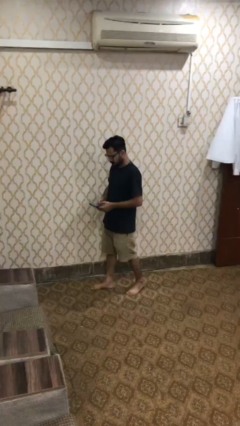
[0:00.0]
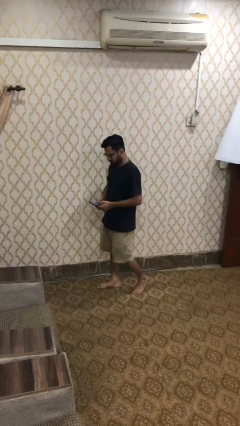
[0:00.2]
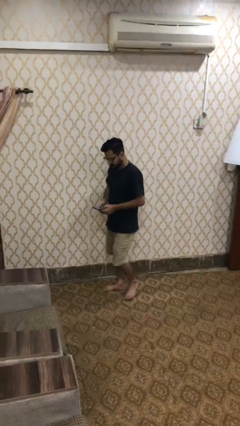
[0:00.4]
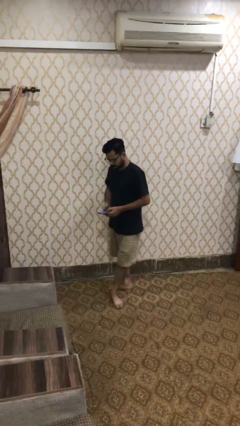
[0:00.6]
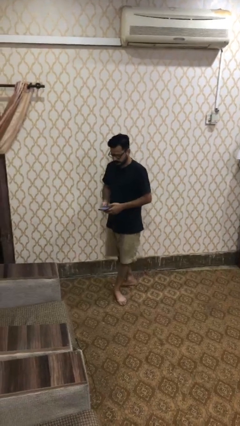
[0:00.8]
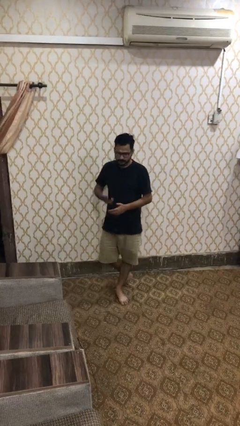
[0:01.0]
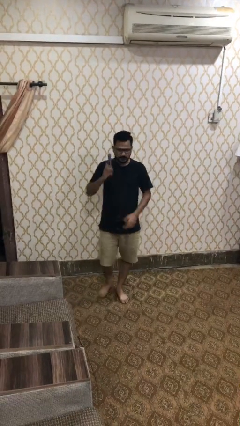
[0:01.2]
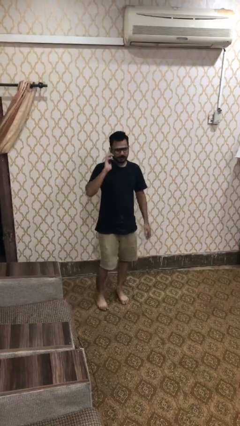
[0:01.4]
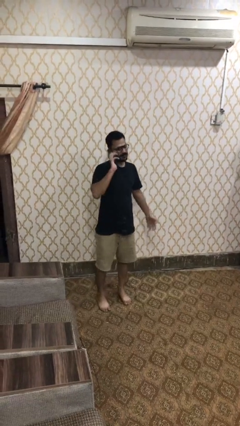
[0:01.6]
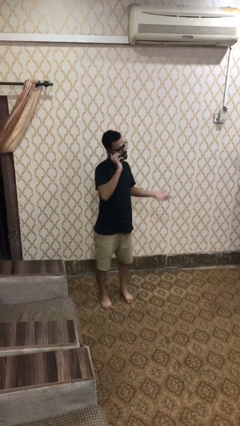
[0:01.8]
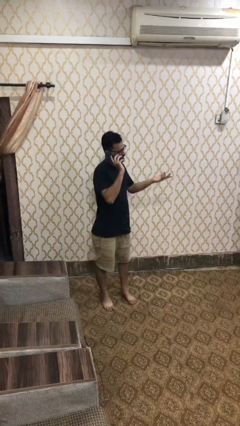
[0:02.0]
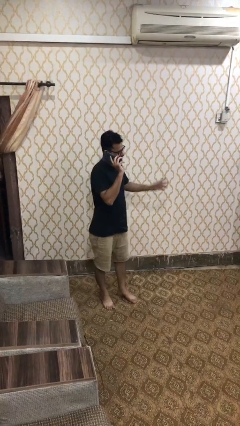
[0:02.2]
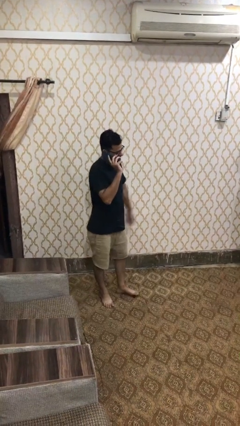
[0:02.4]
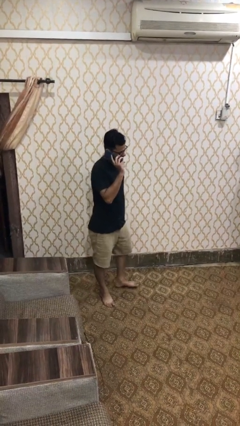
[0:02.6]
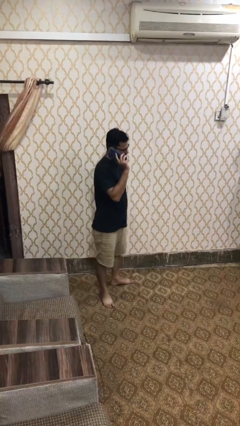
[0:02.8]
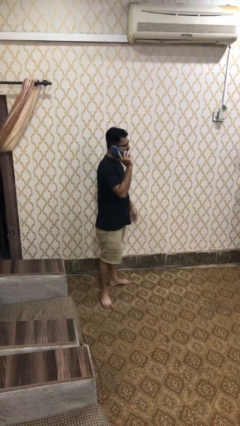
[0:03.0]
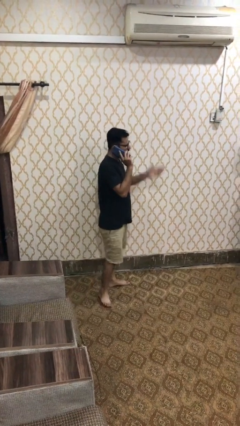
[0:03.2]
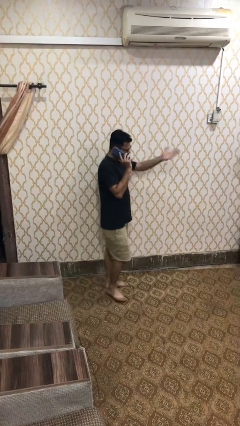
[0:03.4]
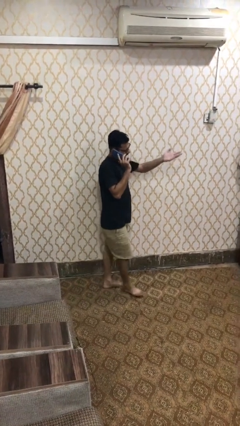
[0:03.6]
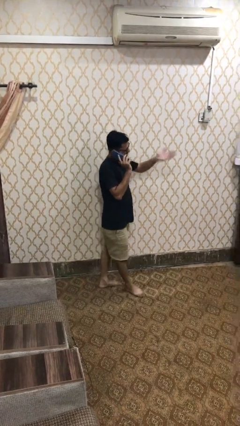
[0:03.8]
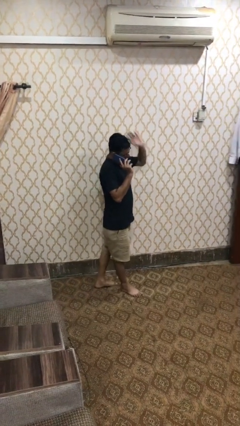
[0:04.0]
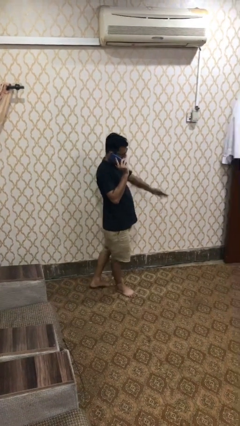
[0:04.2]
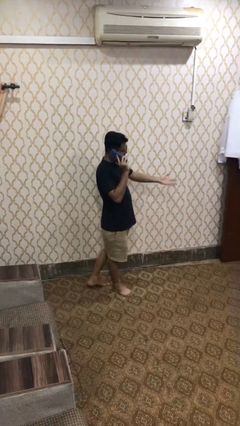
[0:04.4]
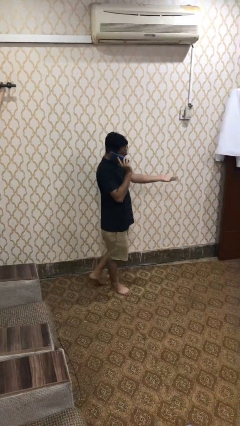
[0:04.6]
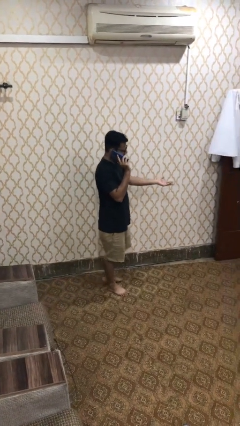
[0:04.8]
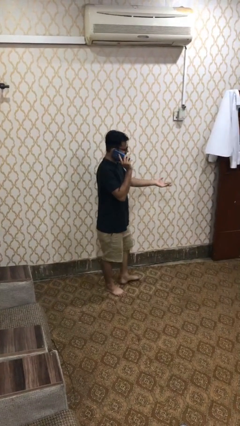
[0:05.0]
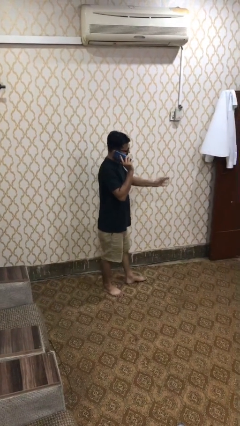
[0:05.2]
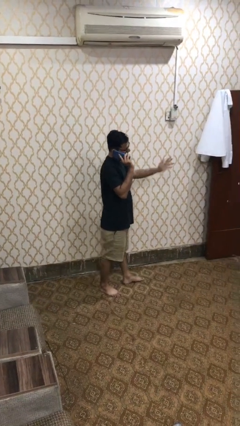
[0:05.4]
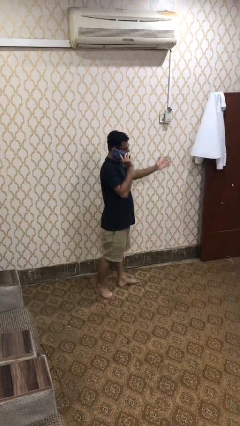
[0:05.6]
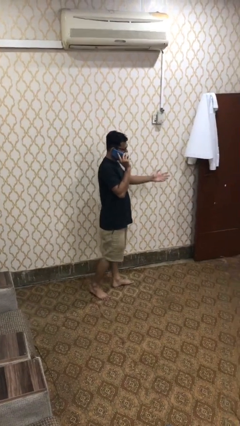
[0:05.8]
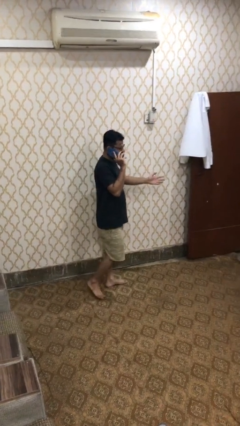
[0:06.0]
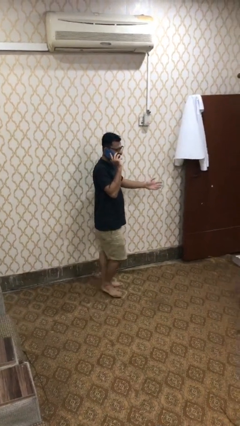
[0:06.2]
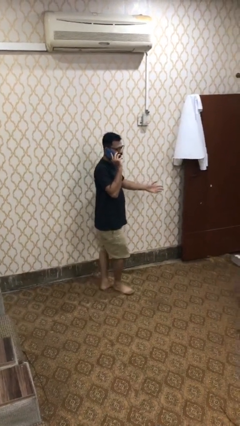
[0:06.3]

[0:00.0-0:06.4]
person talks on phone

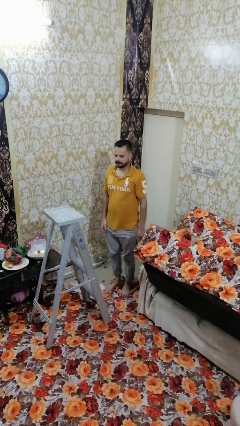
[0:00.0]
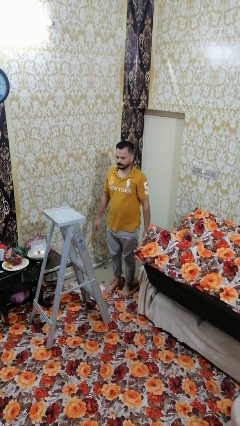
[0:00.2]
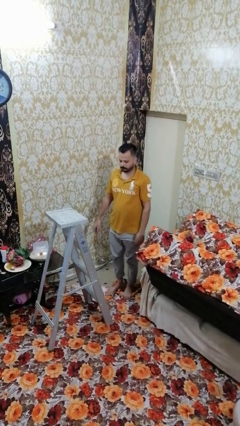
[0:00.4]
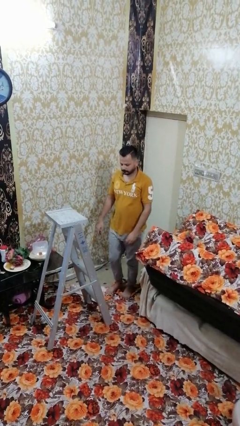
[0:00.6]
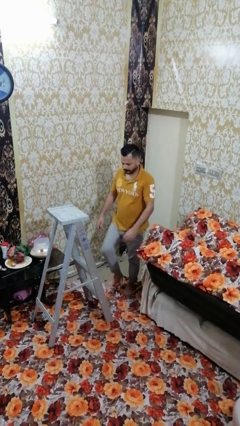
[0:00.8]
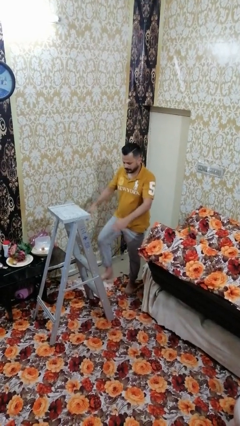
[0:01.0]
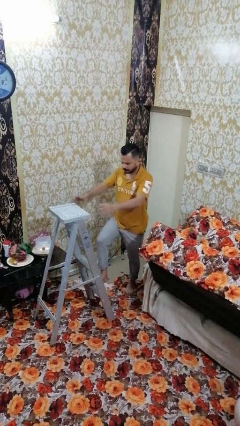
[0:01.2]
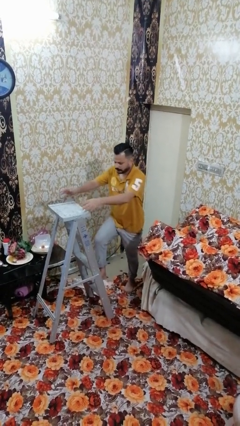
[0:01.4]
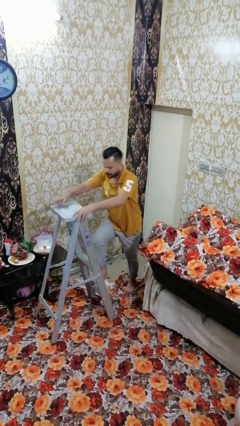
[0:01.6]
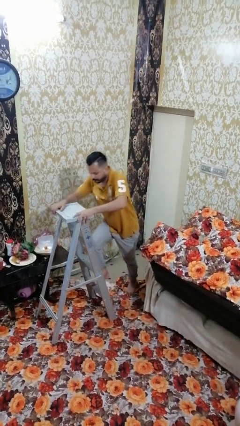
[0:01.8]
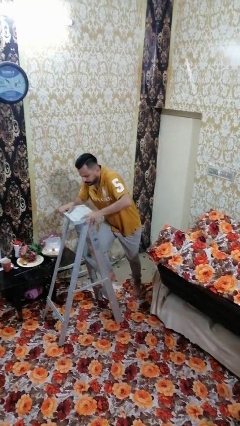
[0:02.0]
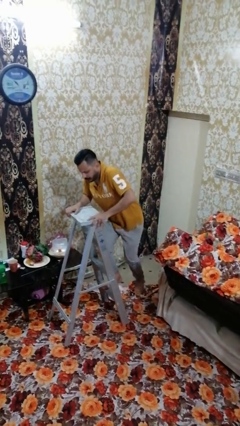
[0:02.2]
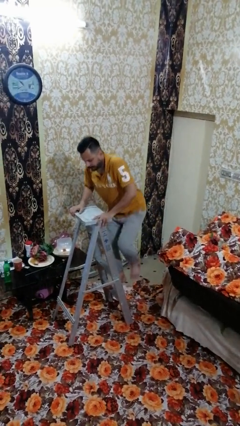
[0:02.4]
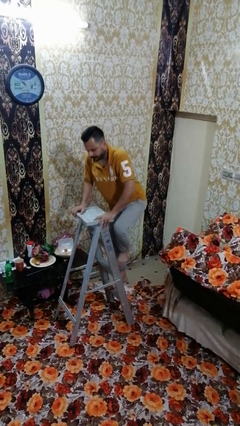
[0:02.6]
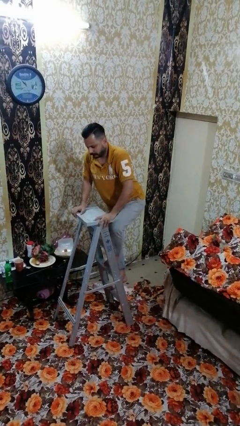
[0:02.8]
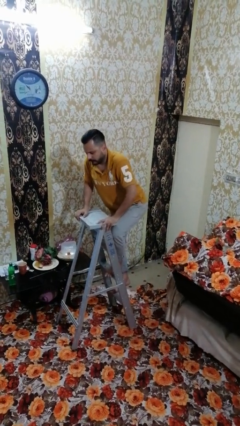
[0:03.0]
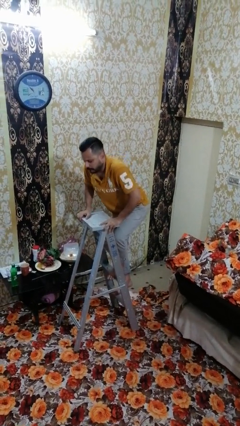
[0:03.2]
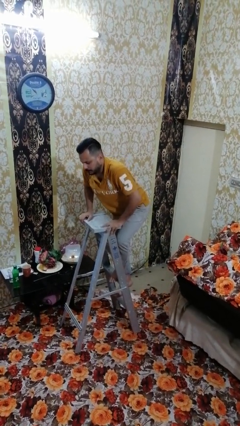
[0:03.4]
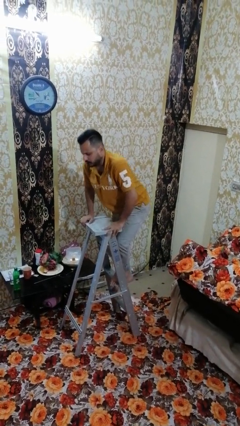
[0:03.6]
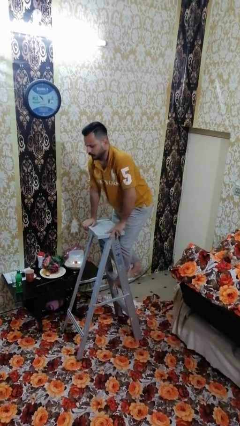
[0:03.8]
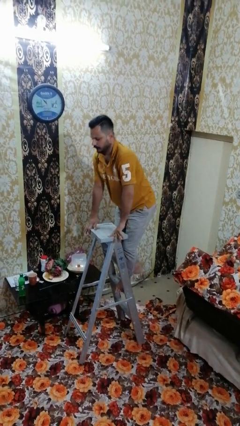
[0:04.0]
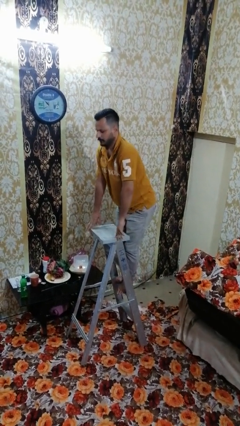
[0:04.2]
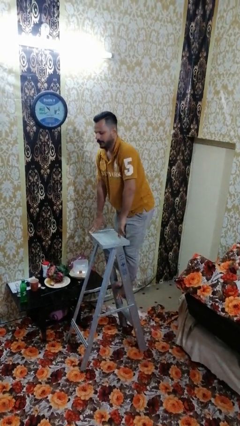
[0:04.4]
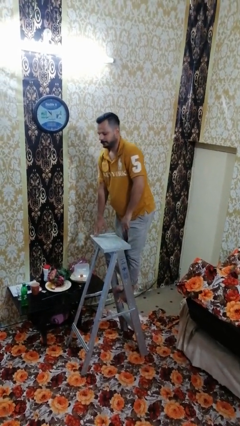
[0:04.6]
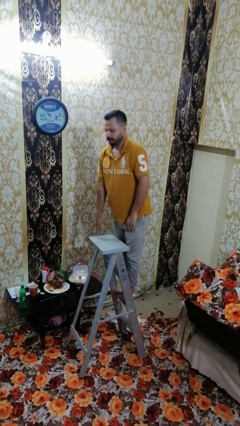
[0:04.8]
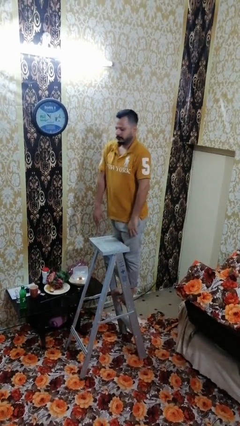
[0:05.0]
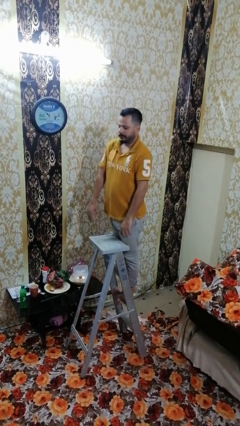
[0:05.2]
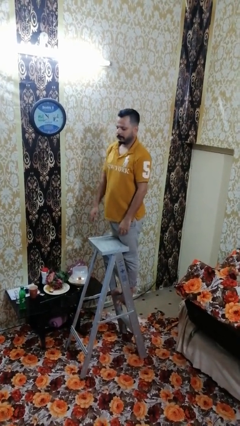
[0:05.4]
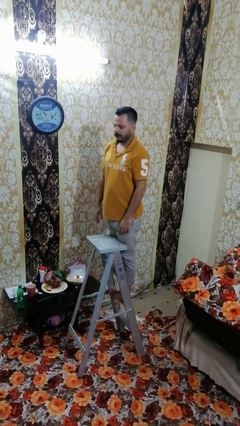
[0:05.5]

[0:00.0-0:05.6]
person climbs up ladder

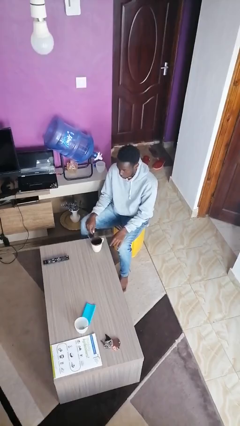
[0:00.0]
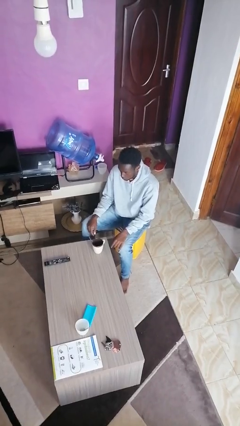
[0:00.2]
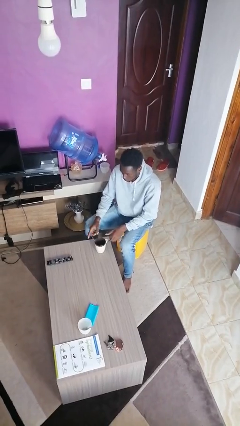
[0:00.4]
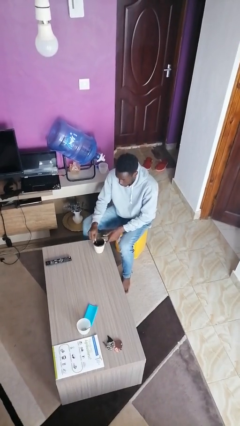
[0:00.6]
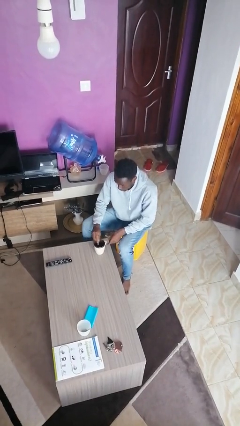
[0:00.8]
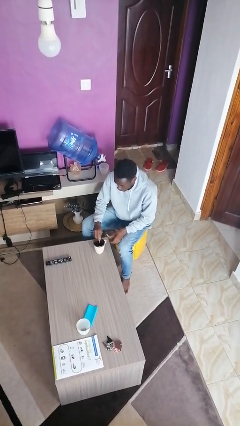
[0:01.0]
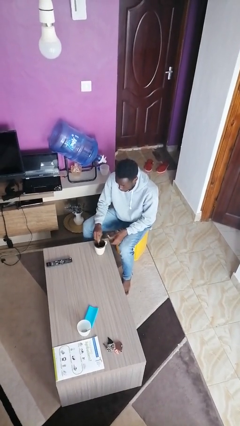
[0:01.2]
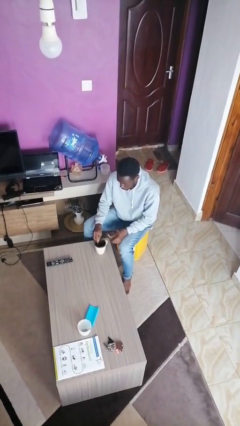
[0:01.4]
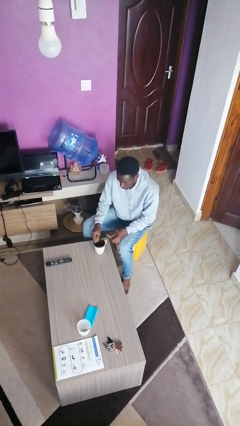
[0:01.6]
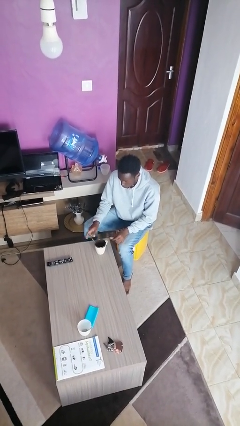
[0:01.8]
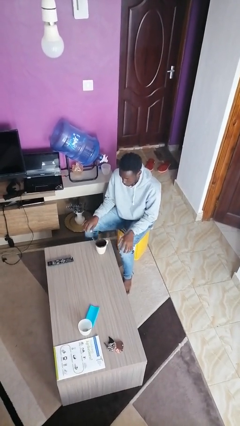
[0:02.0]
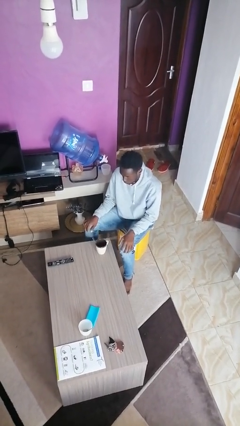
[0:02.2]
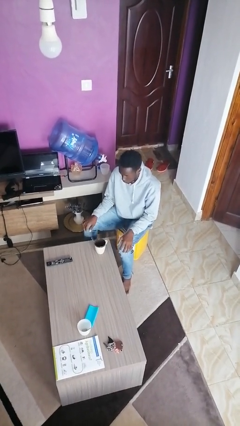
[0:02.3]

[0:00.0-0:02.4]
person stirs mug

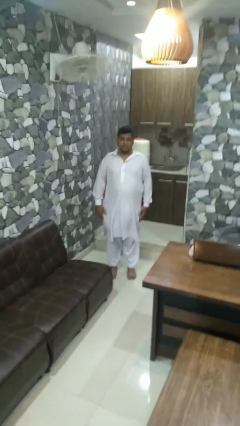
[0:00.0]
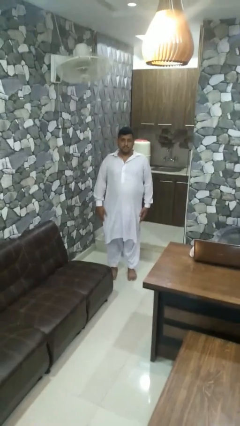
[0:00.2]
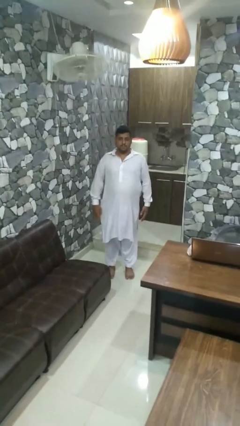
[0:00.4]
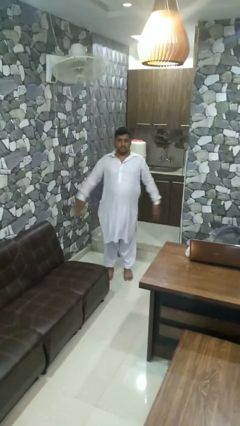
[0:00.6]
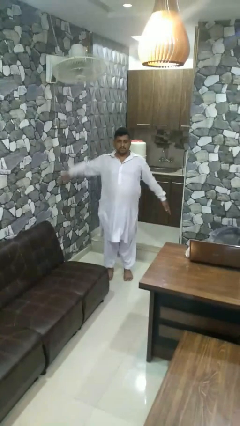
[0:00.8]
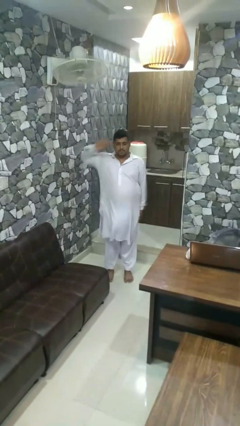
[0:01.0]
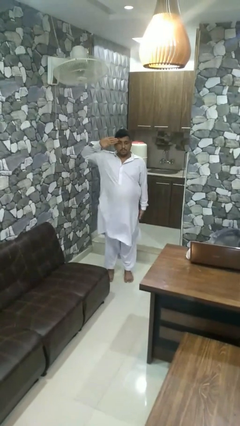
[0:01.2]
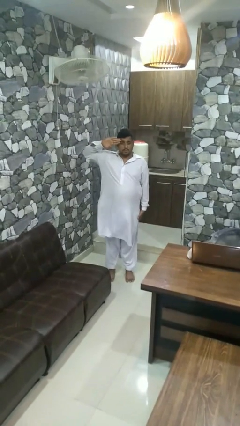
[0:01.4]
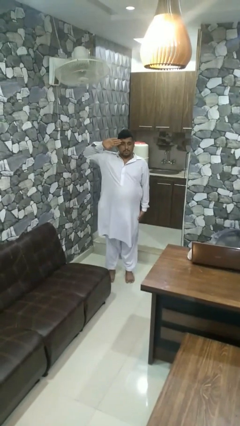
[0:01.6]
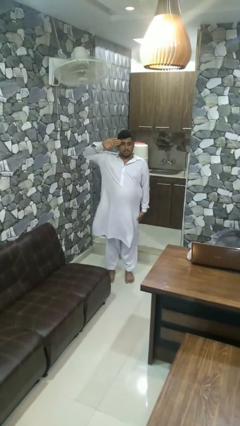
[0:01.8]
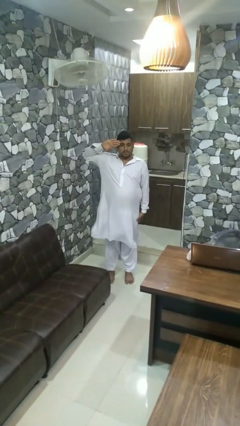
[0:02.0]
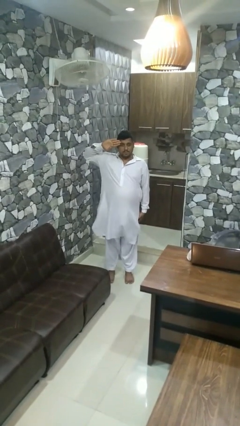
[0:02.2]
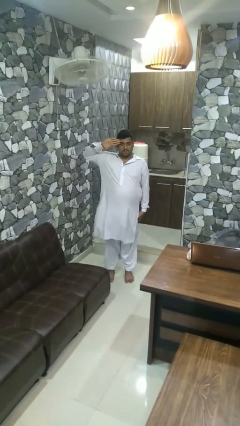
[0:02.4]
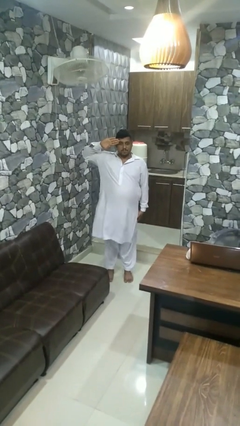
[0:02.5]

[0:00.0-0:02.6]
person salutes

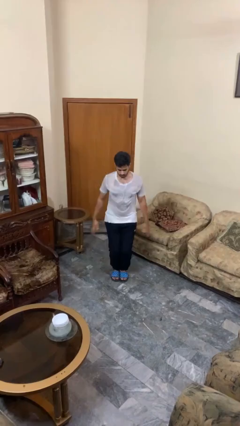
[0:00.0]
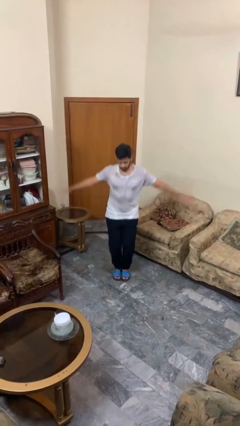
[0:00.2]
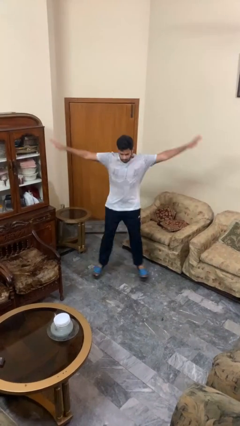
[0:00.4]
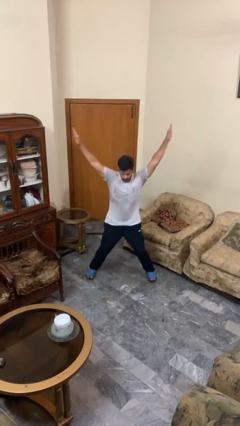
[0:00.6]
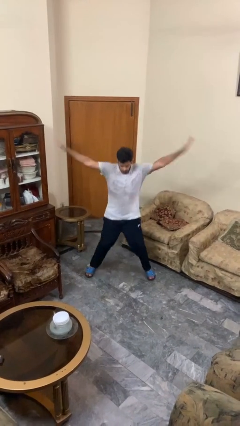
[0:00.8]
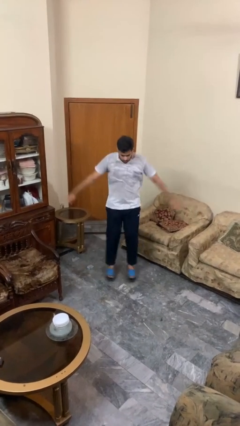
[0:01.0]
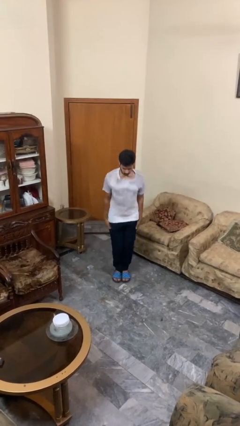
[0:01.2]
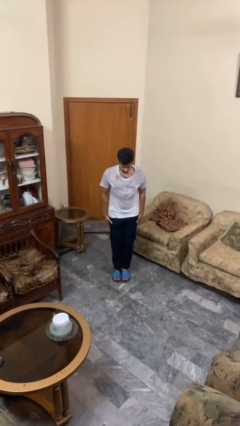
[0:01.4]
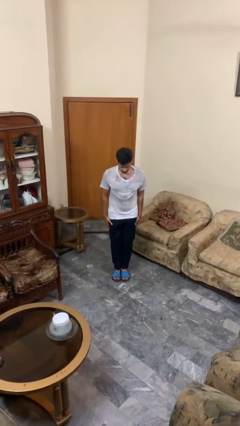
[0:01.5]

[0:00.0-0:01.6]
person exercises with jumping jacks
